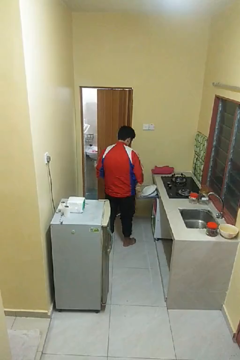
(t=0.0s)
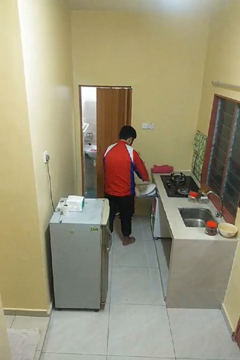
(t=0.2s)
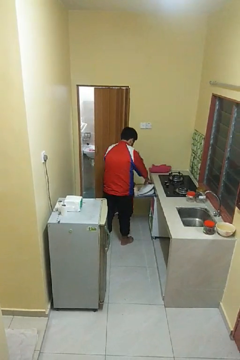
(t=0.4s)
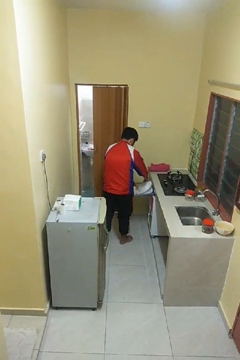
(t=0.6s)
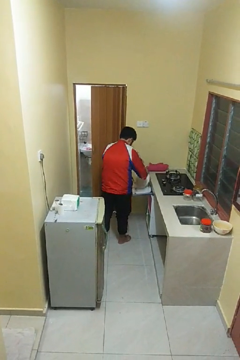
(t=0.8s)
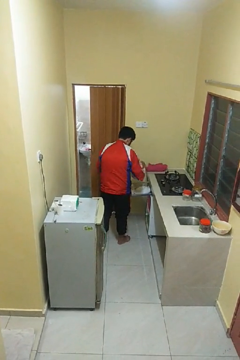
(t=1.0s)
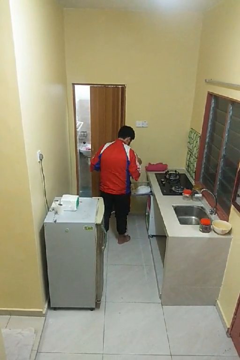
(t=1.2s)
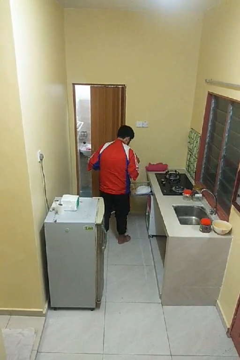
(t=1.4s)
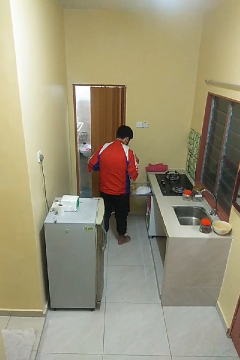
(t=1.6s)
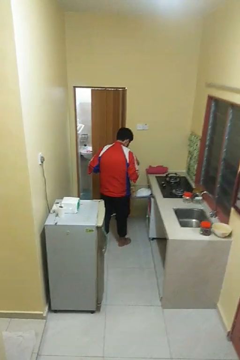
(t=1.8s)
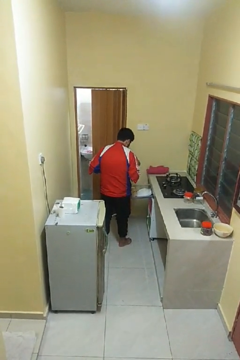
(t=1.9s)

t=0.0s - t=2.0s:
person takes object from kitchen drawer

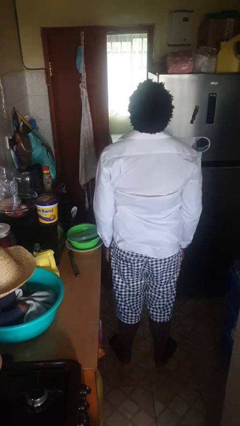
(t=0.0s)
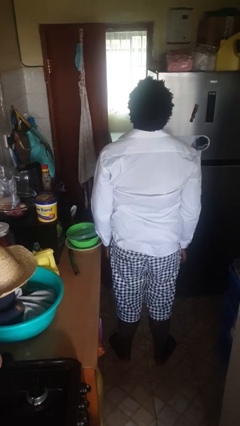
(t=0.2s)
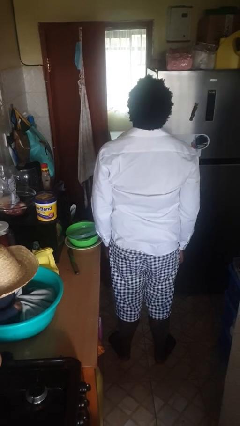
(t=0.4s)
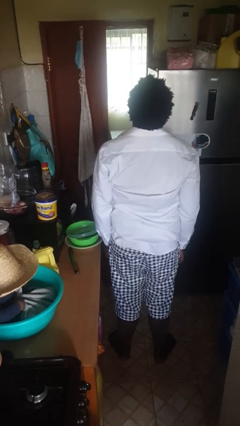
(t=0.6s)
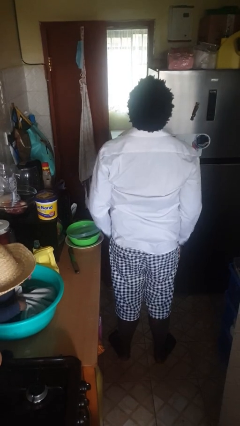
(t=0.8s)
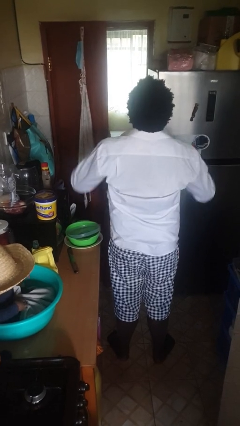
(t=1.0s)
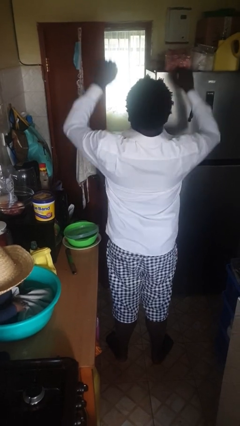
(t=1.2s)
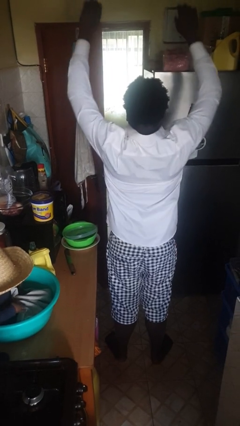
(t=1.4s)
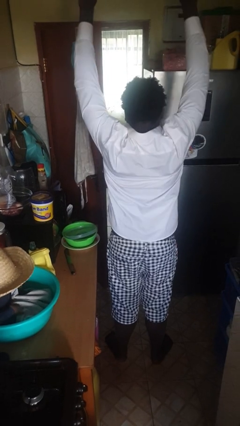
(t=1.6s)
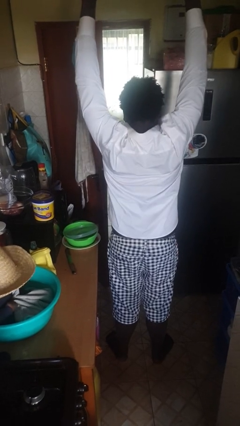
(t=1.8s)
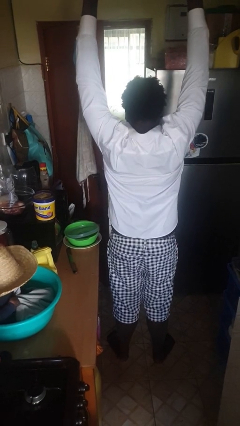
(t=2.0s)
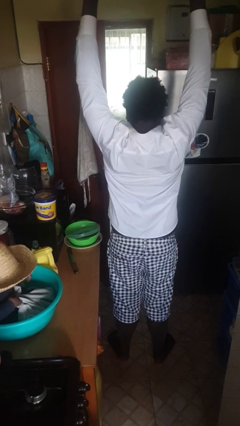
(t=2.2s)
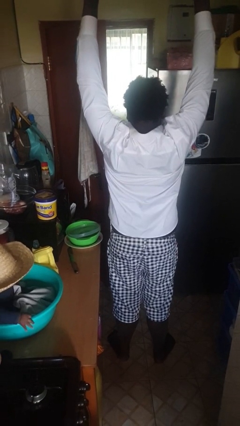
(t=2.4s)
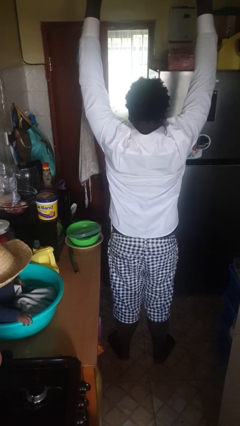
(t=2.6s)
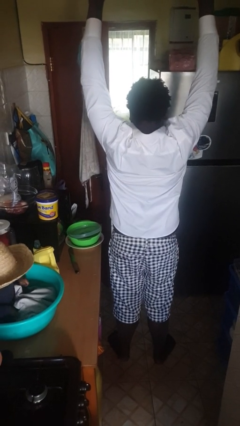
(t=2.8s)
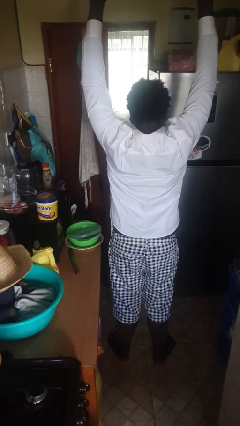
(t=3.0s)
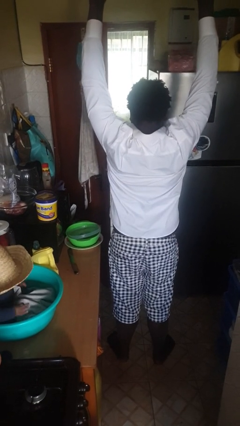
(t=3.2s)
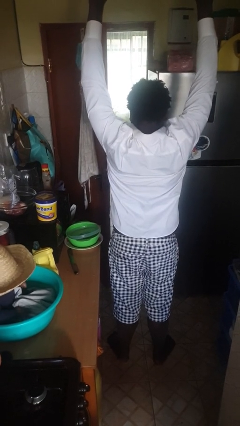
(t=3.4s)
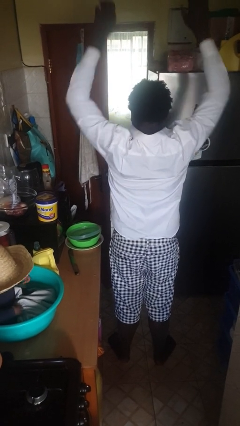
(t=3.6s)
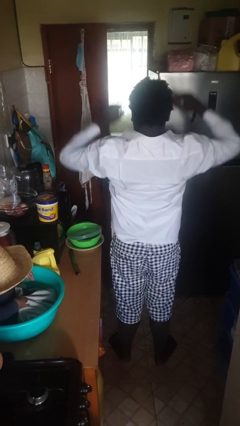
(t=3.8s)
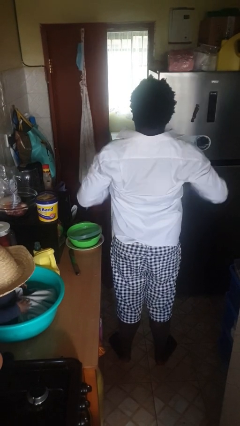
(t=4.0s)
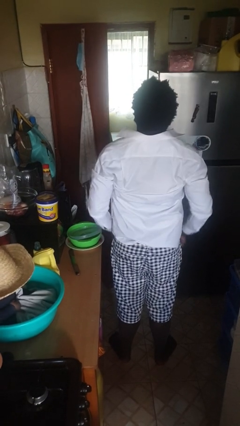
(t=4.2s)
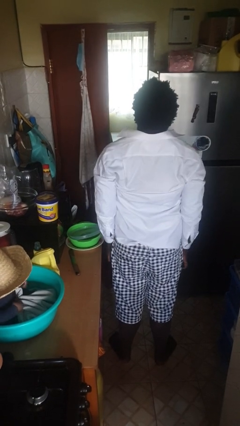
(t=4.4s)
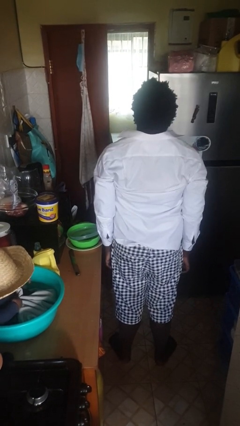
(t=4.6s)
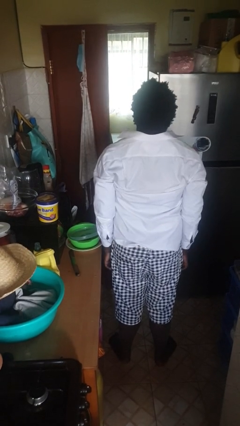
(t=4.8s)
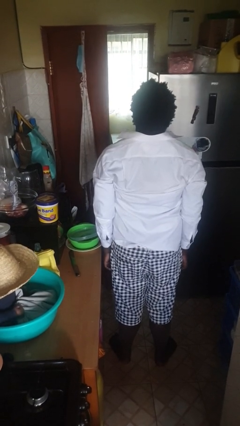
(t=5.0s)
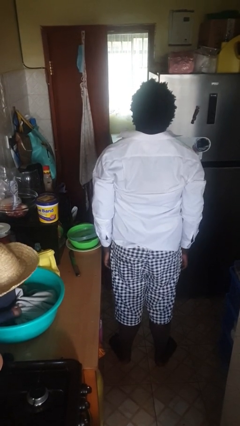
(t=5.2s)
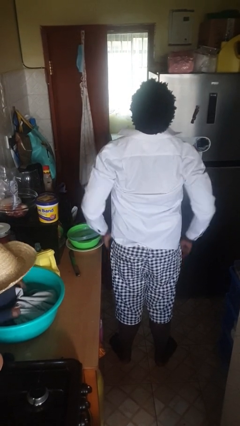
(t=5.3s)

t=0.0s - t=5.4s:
person stretches arms over head

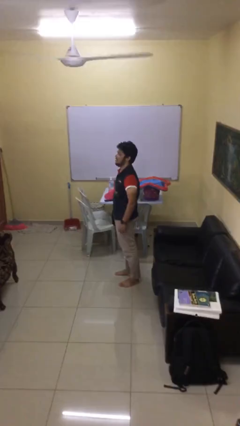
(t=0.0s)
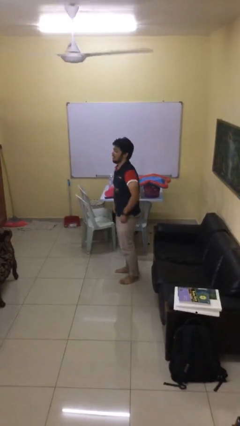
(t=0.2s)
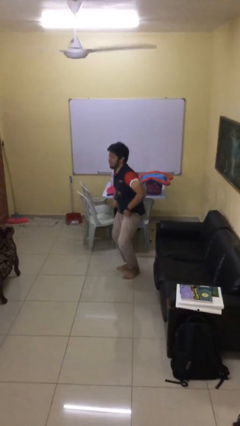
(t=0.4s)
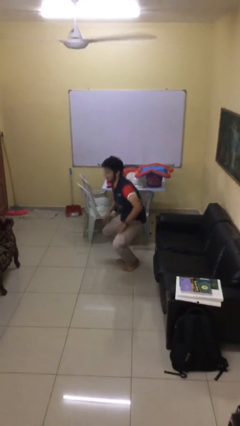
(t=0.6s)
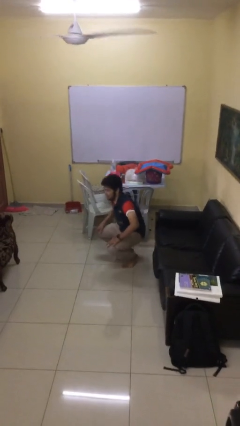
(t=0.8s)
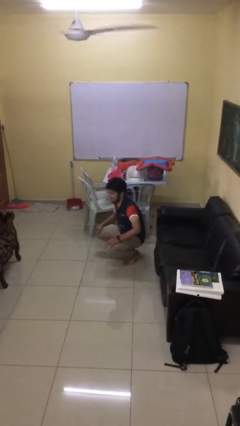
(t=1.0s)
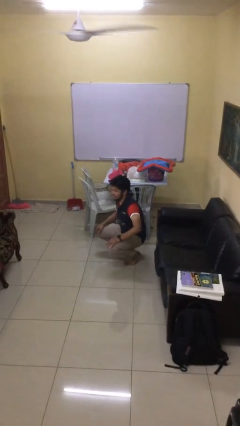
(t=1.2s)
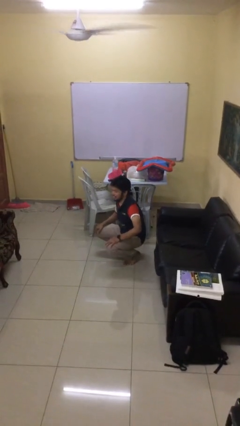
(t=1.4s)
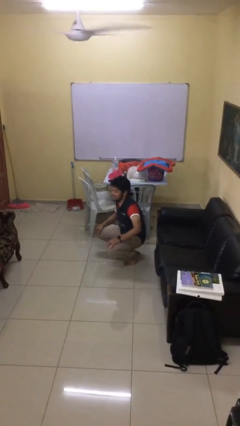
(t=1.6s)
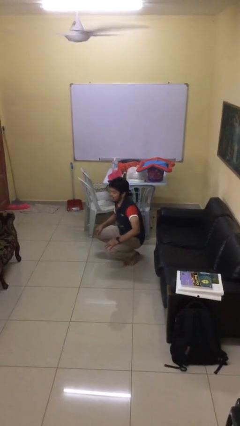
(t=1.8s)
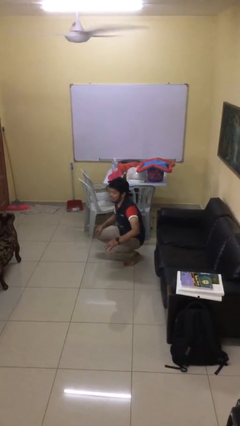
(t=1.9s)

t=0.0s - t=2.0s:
person squats

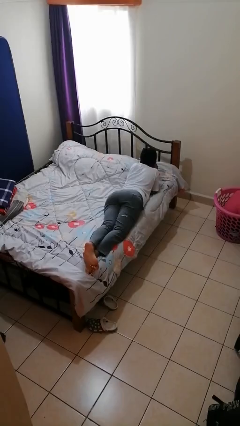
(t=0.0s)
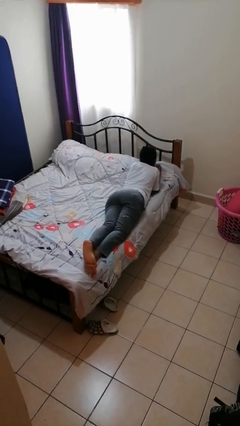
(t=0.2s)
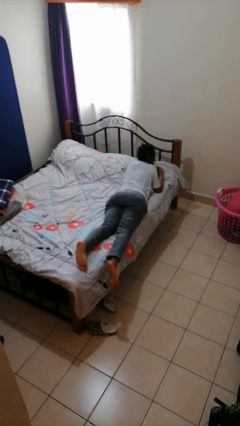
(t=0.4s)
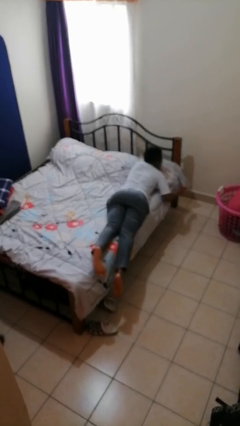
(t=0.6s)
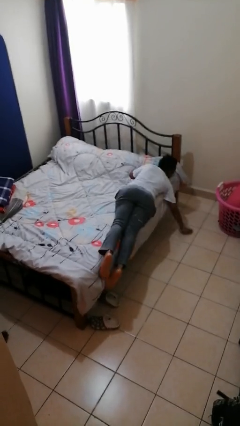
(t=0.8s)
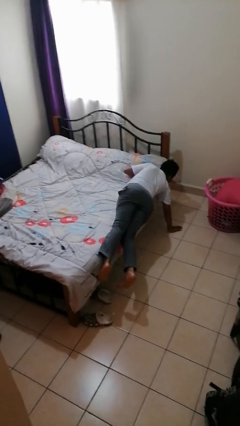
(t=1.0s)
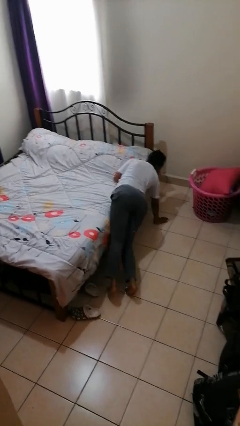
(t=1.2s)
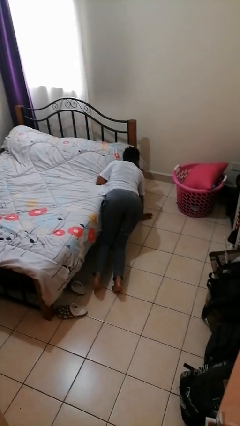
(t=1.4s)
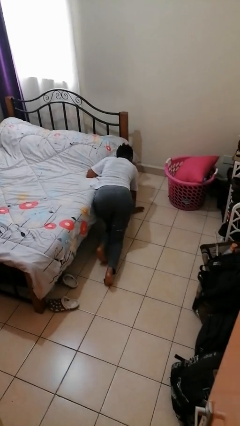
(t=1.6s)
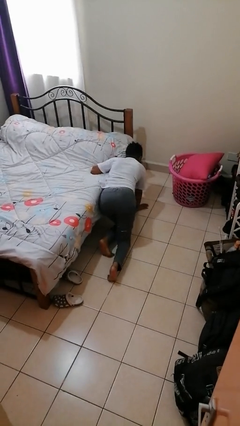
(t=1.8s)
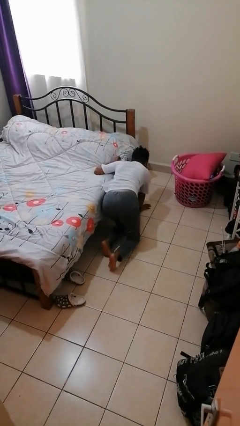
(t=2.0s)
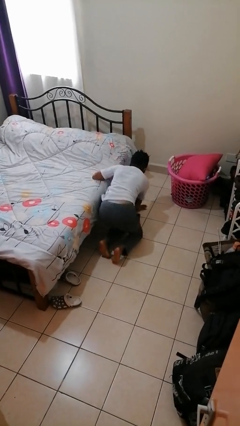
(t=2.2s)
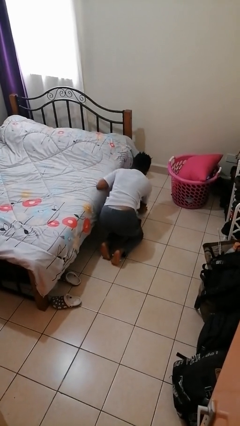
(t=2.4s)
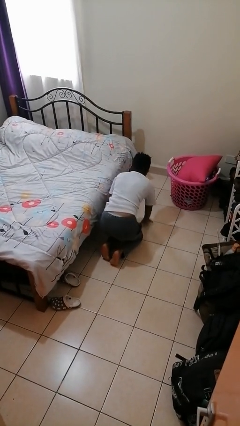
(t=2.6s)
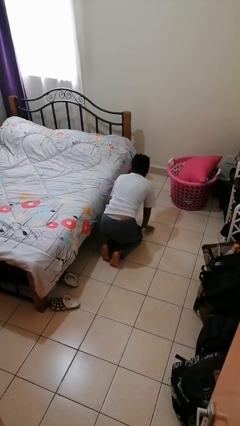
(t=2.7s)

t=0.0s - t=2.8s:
person falls from bed

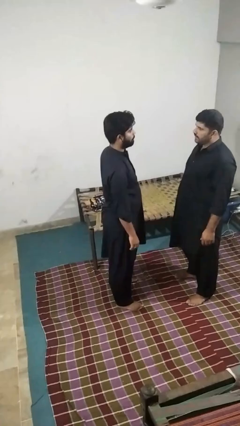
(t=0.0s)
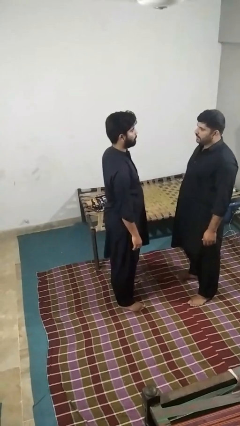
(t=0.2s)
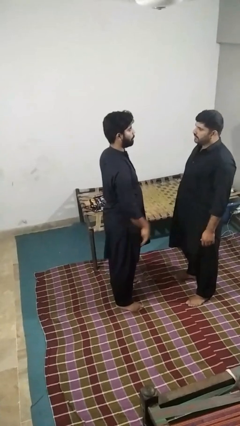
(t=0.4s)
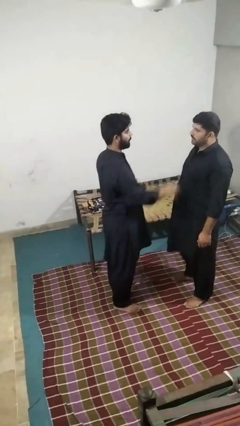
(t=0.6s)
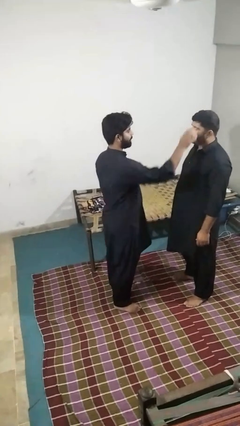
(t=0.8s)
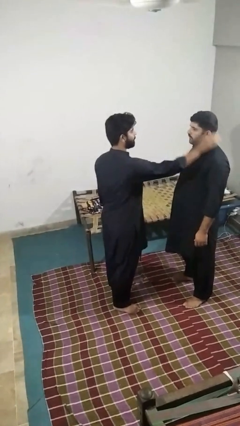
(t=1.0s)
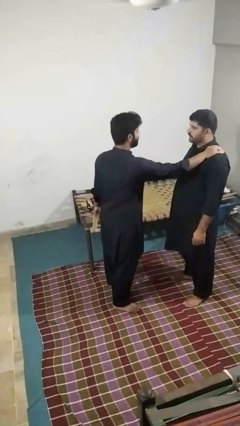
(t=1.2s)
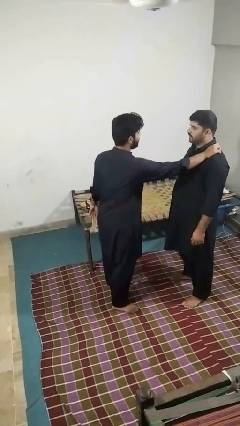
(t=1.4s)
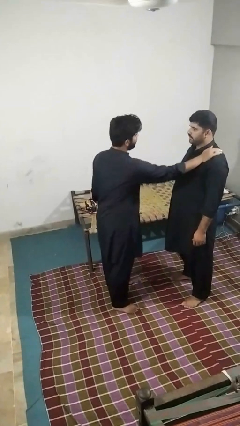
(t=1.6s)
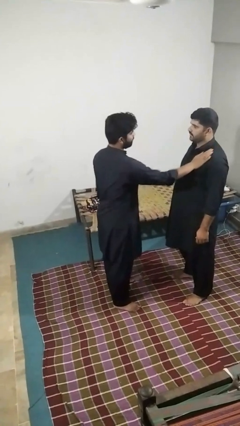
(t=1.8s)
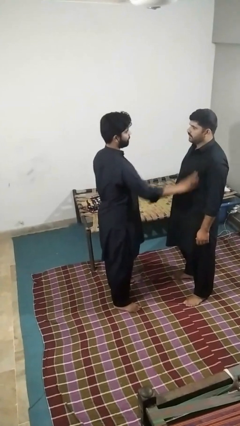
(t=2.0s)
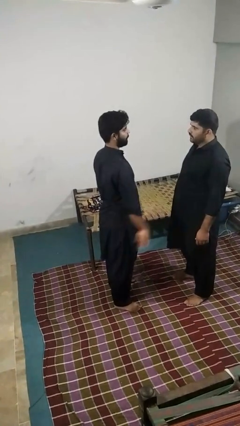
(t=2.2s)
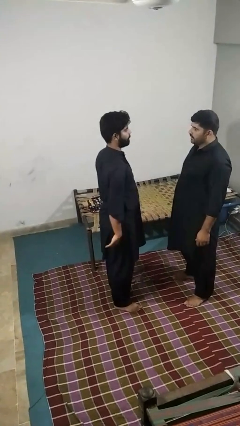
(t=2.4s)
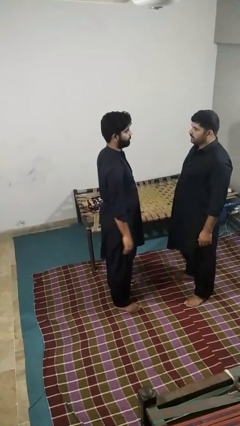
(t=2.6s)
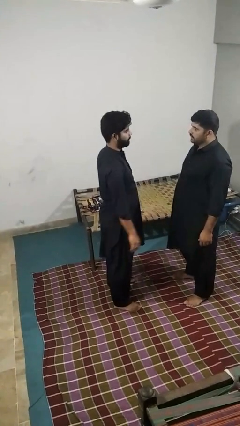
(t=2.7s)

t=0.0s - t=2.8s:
person pounds shoulders of person

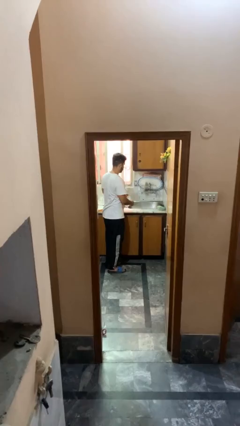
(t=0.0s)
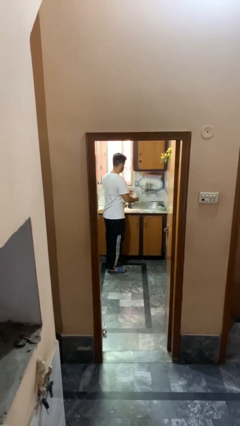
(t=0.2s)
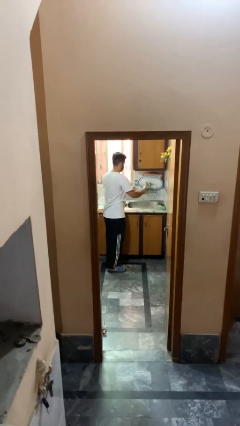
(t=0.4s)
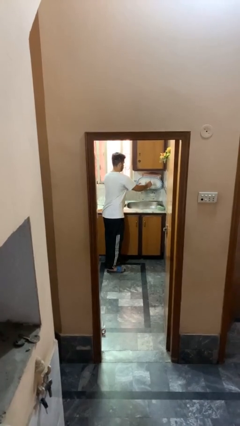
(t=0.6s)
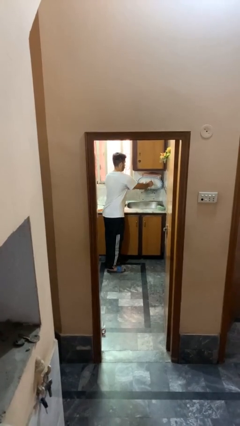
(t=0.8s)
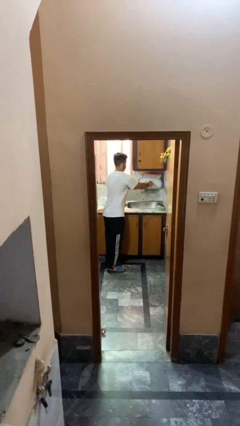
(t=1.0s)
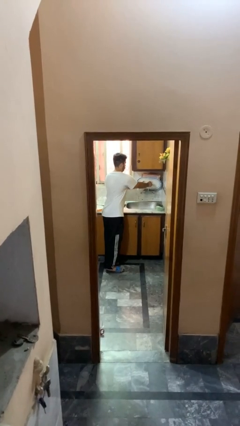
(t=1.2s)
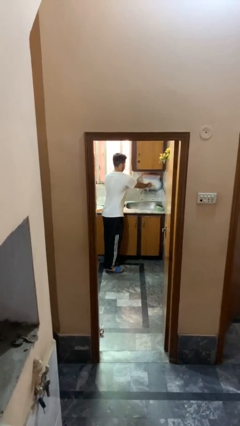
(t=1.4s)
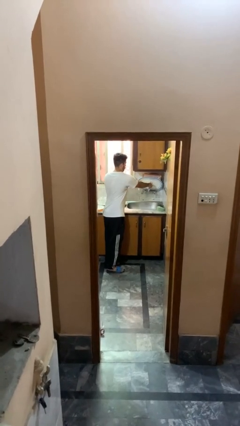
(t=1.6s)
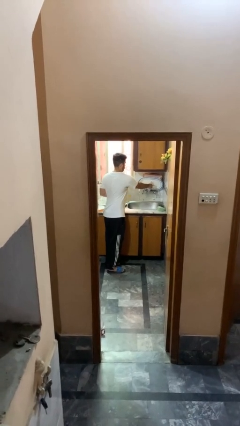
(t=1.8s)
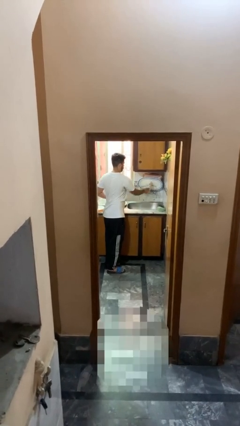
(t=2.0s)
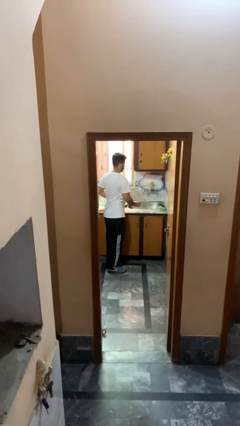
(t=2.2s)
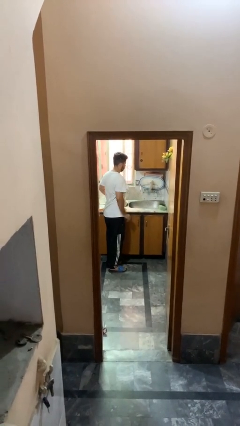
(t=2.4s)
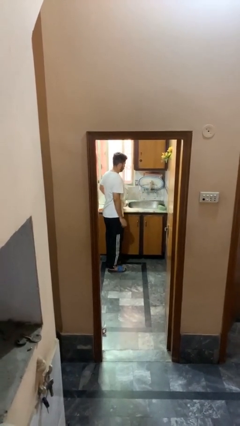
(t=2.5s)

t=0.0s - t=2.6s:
person loads dishwasher

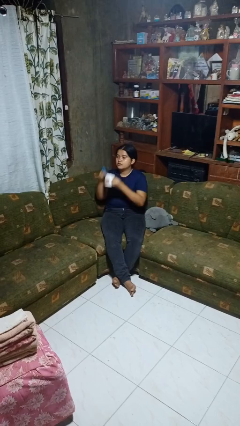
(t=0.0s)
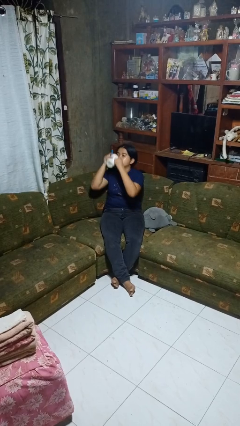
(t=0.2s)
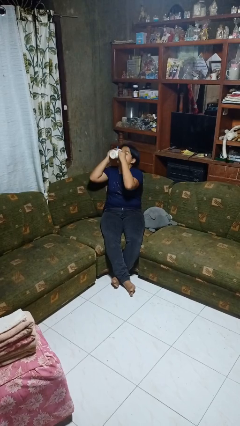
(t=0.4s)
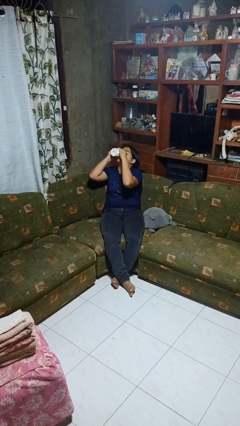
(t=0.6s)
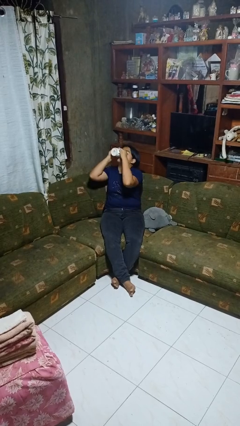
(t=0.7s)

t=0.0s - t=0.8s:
person drinks from mug
